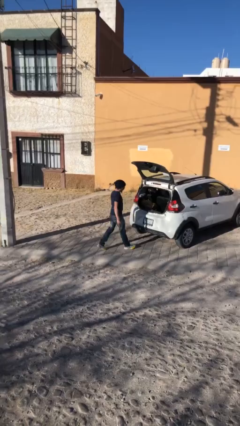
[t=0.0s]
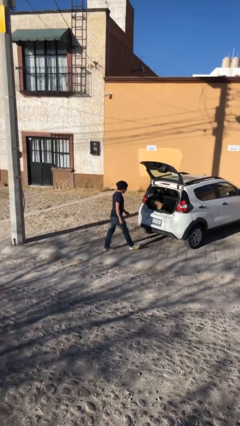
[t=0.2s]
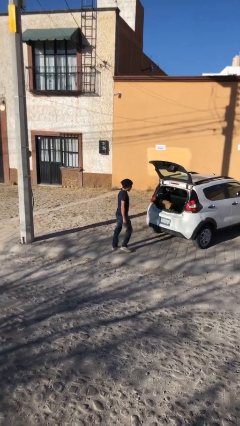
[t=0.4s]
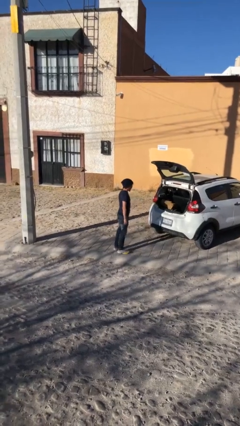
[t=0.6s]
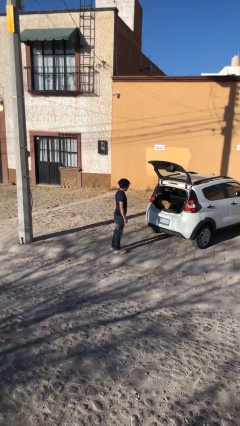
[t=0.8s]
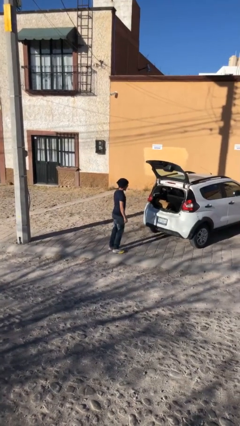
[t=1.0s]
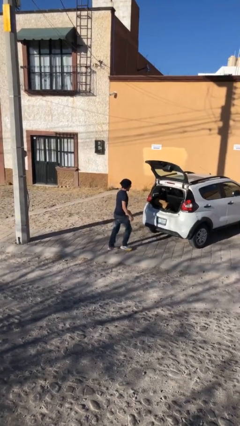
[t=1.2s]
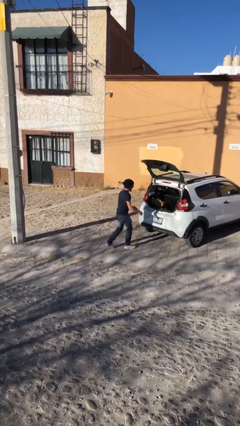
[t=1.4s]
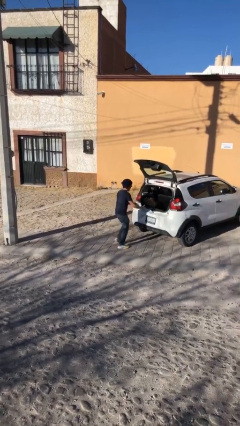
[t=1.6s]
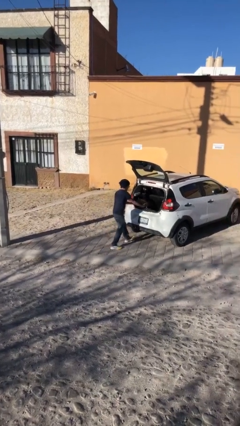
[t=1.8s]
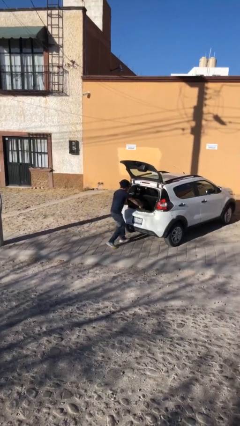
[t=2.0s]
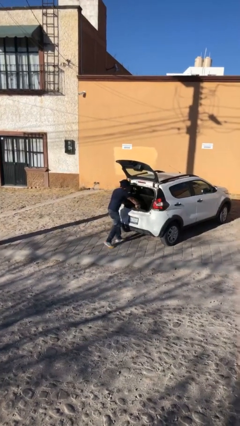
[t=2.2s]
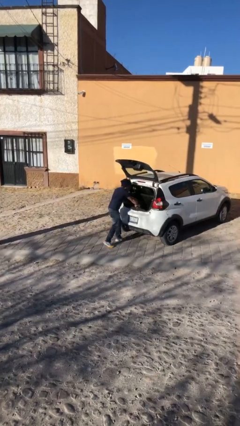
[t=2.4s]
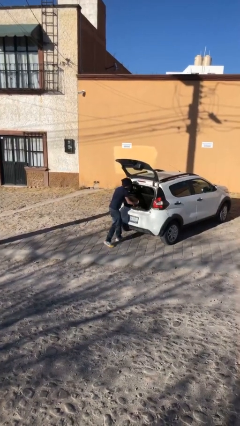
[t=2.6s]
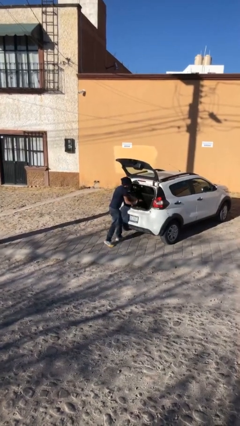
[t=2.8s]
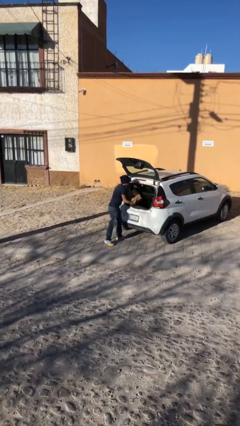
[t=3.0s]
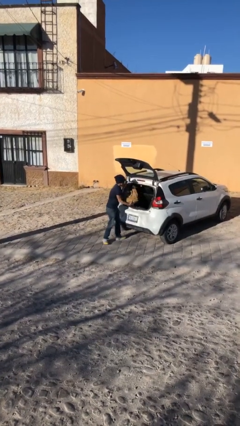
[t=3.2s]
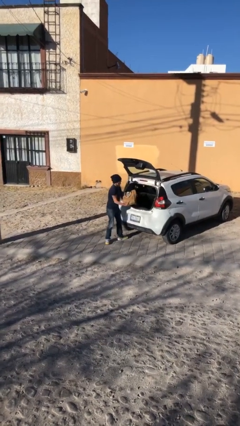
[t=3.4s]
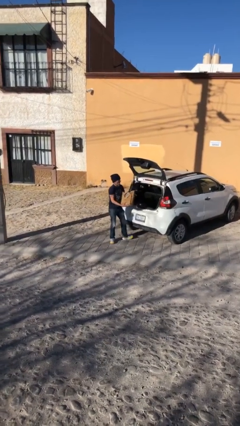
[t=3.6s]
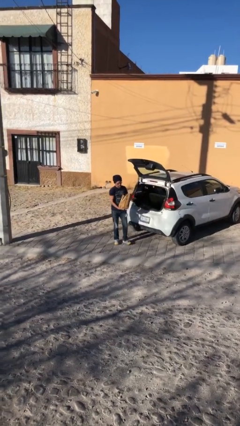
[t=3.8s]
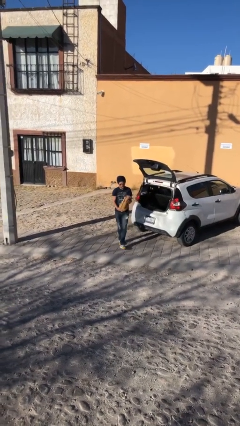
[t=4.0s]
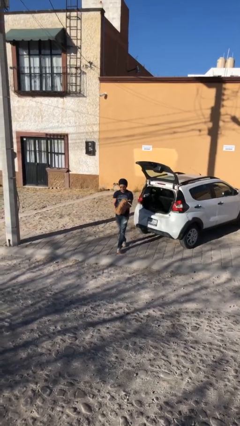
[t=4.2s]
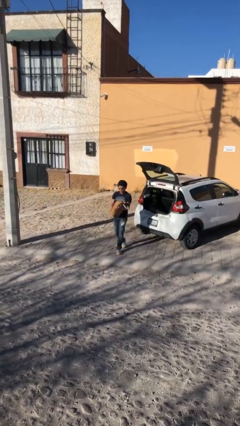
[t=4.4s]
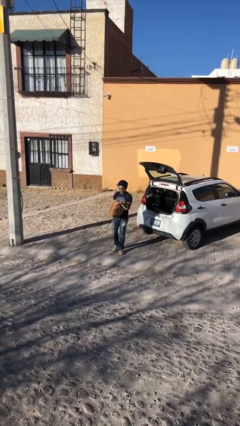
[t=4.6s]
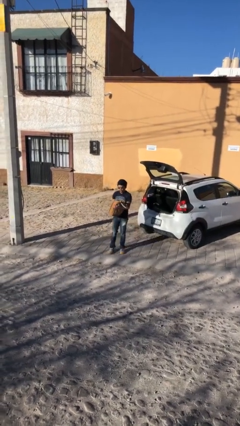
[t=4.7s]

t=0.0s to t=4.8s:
person unloads car

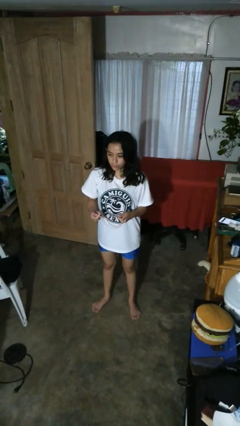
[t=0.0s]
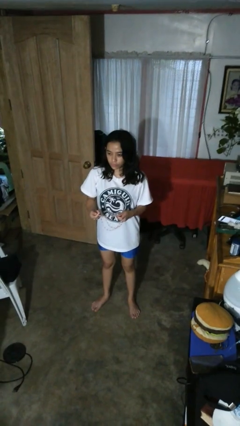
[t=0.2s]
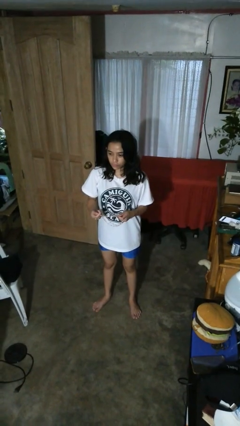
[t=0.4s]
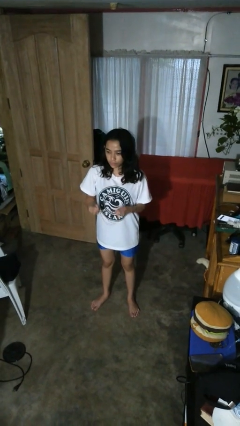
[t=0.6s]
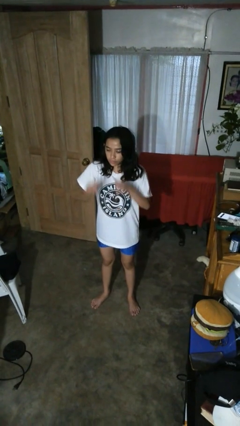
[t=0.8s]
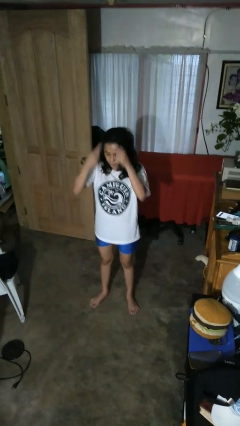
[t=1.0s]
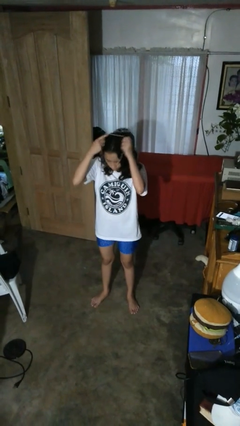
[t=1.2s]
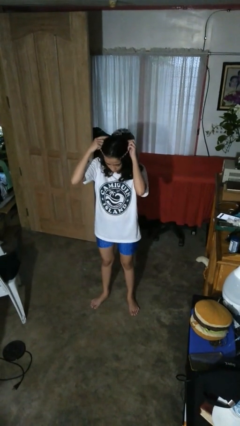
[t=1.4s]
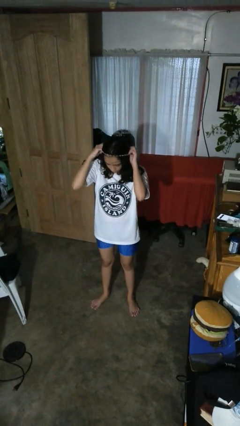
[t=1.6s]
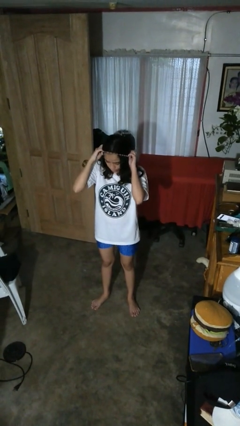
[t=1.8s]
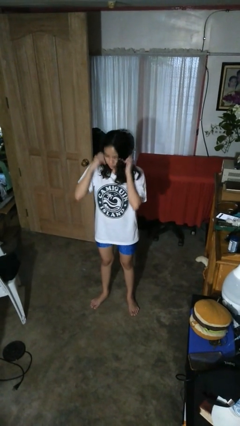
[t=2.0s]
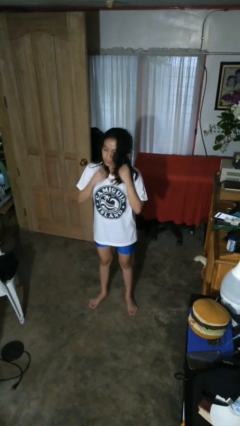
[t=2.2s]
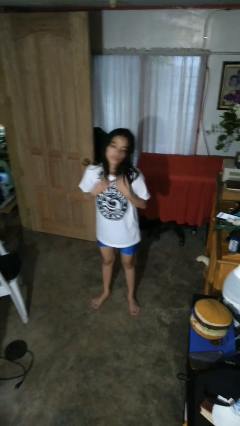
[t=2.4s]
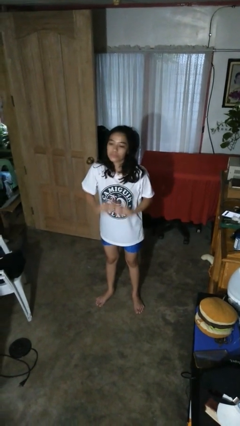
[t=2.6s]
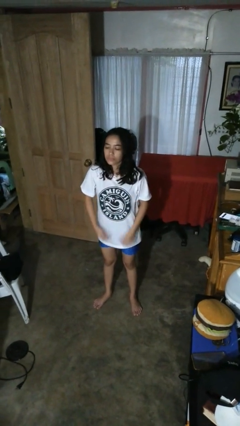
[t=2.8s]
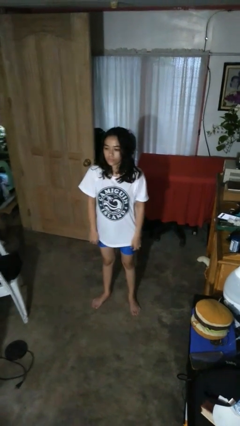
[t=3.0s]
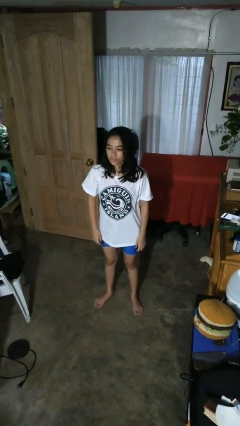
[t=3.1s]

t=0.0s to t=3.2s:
person puts on necklace

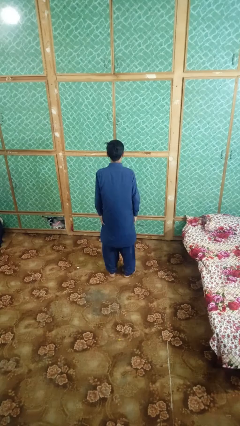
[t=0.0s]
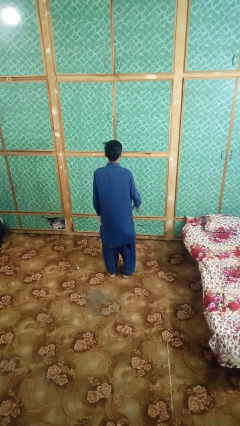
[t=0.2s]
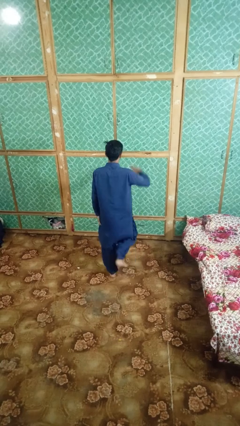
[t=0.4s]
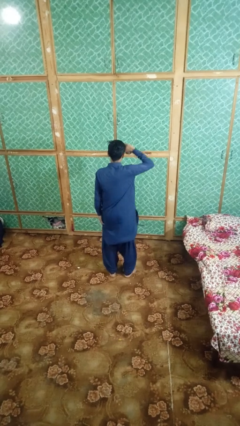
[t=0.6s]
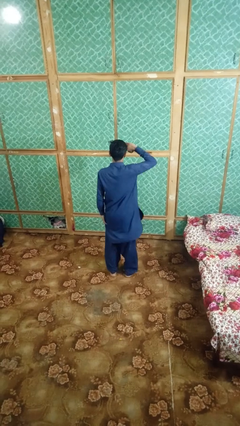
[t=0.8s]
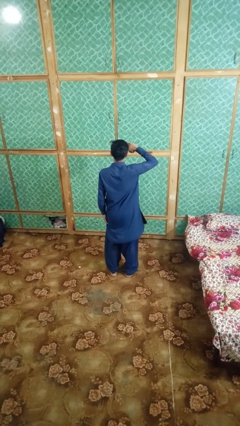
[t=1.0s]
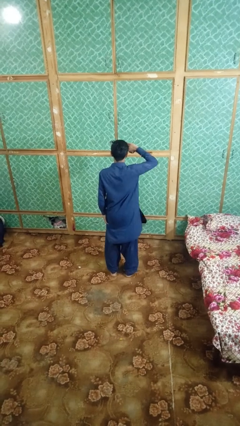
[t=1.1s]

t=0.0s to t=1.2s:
person salutes

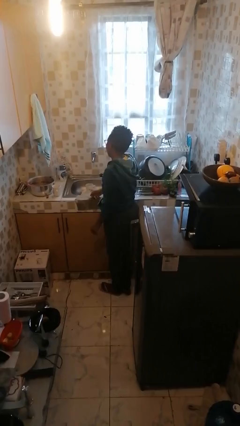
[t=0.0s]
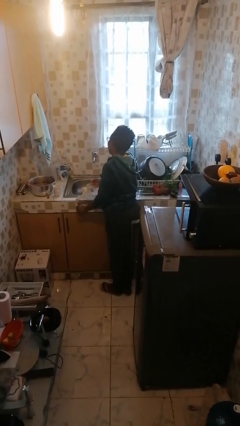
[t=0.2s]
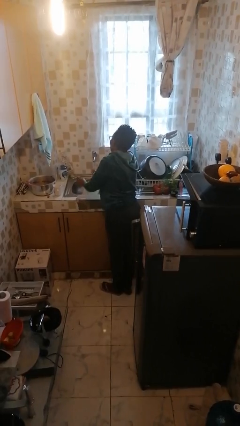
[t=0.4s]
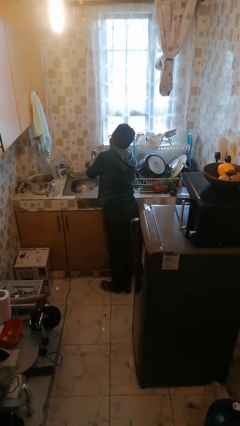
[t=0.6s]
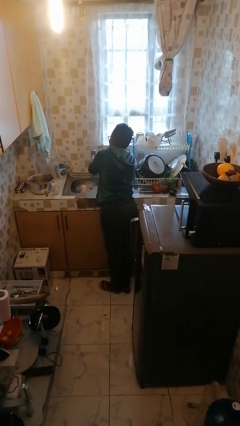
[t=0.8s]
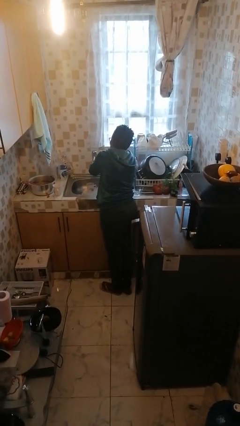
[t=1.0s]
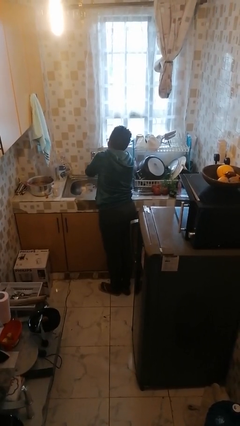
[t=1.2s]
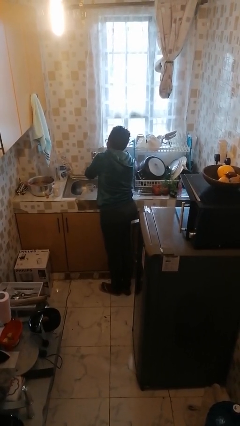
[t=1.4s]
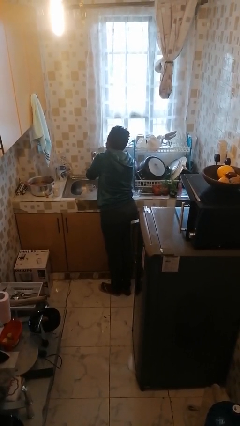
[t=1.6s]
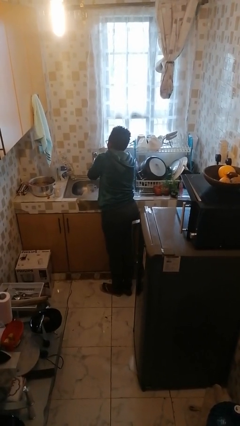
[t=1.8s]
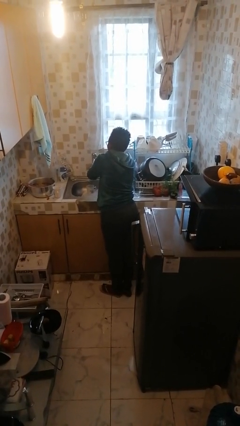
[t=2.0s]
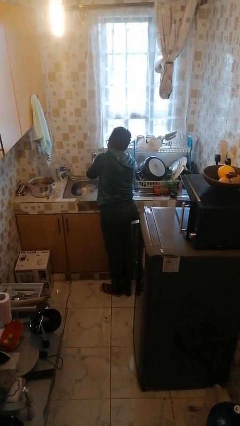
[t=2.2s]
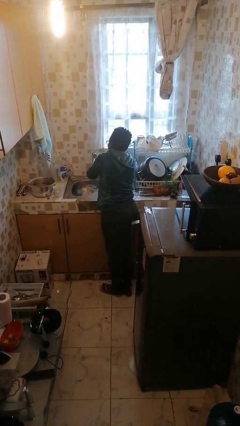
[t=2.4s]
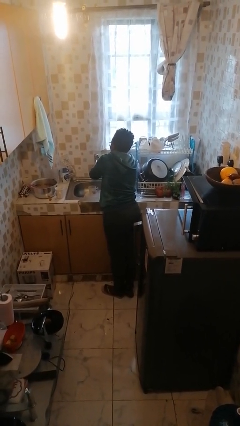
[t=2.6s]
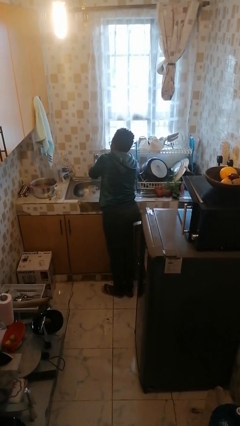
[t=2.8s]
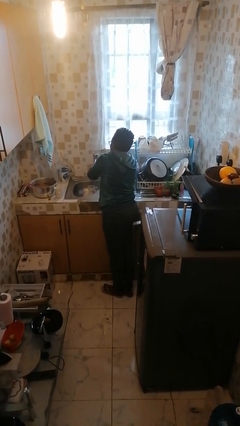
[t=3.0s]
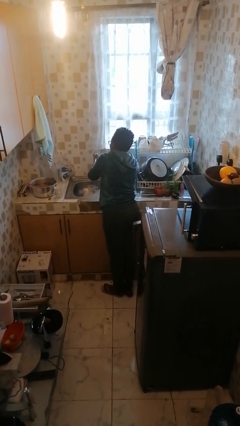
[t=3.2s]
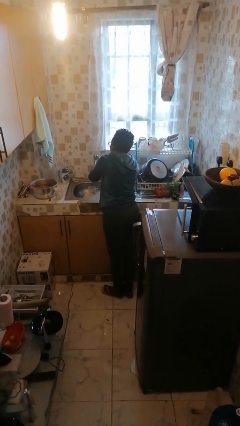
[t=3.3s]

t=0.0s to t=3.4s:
person washes hands

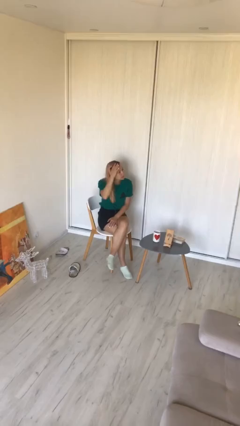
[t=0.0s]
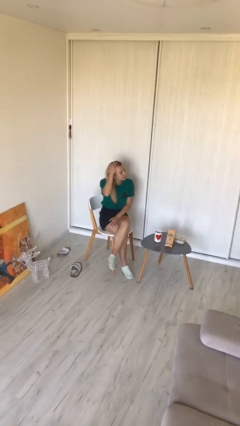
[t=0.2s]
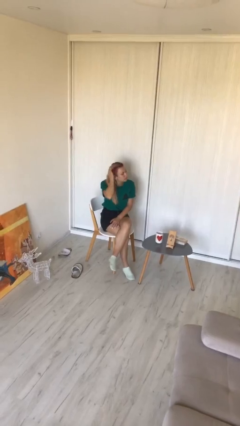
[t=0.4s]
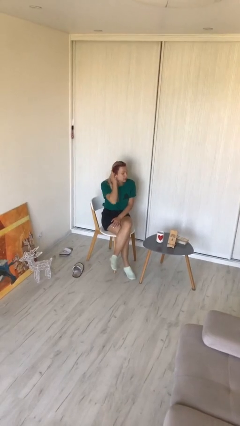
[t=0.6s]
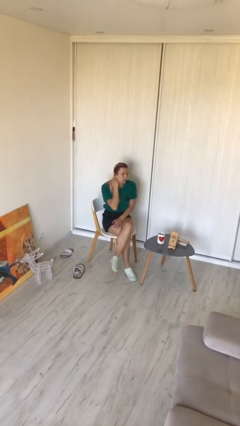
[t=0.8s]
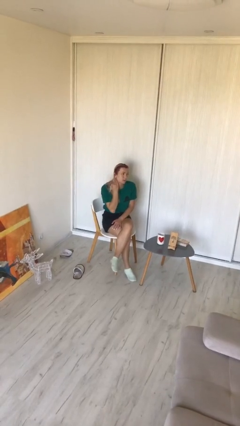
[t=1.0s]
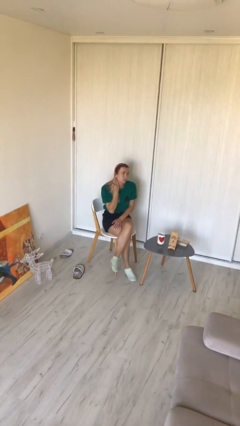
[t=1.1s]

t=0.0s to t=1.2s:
person strokes hair

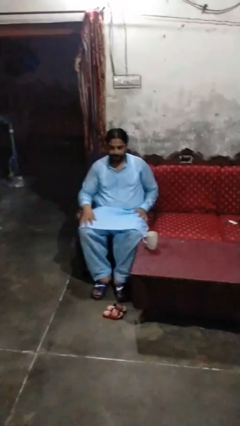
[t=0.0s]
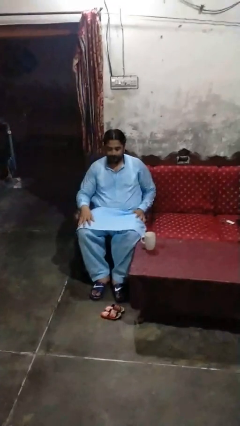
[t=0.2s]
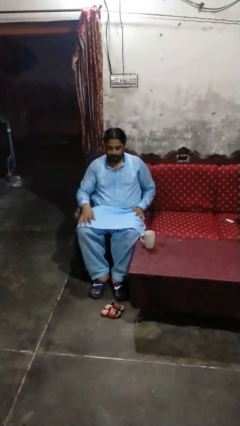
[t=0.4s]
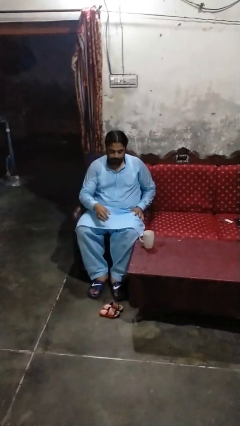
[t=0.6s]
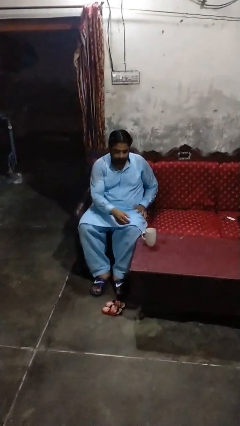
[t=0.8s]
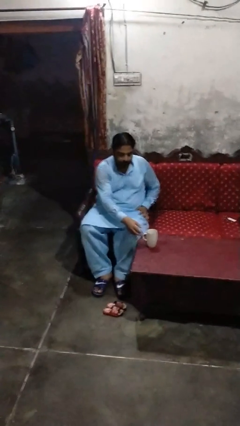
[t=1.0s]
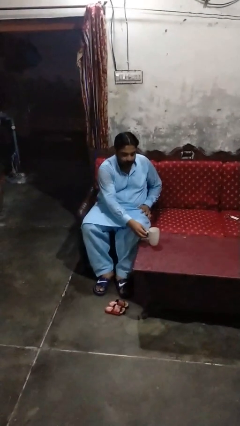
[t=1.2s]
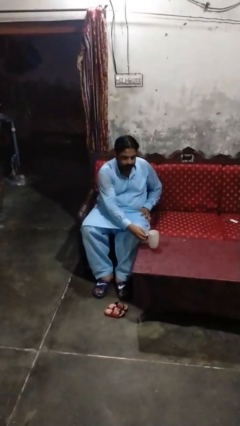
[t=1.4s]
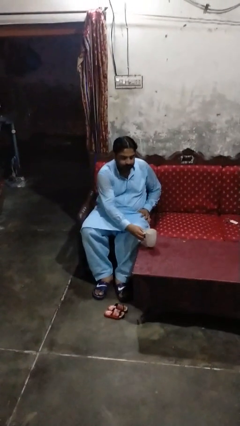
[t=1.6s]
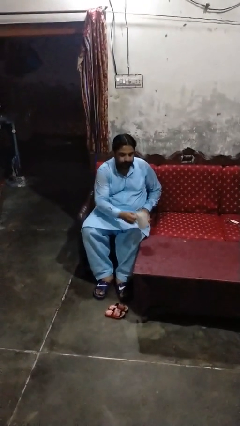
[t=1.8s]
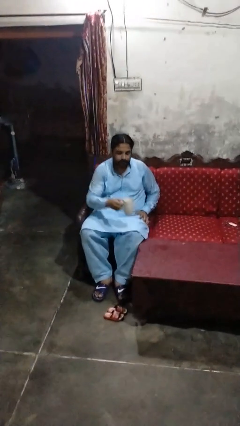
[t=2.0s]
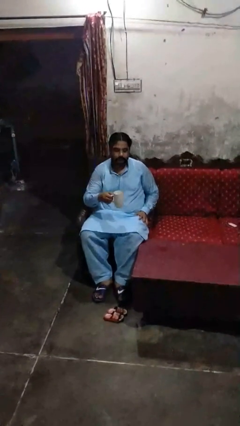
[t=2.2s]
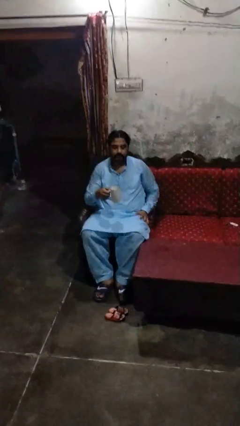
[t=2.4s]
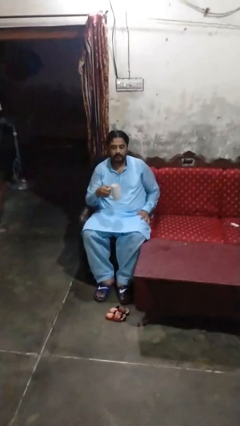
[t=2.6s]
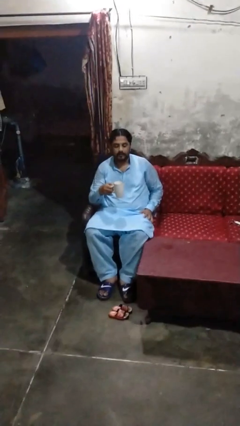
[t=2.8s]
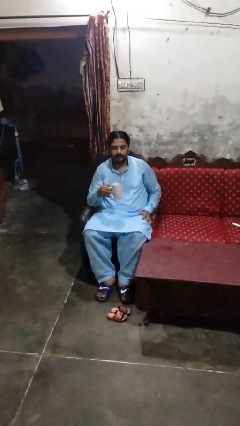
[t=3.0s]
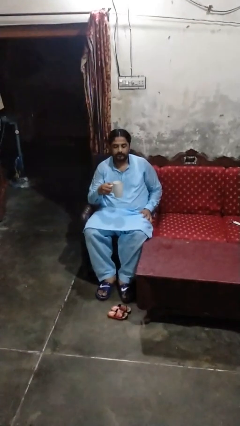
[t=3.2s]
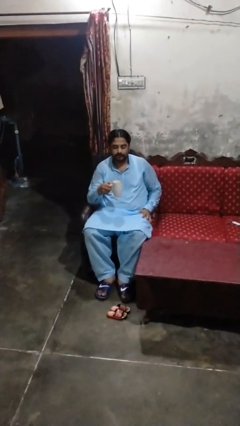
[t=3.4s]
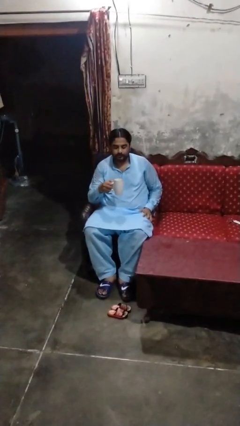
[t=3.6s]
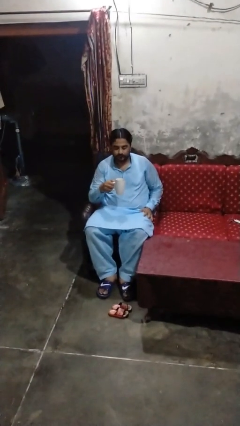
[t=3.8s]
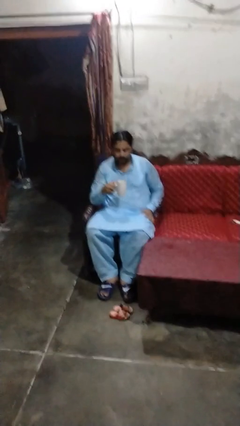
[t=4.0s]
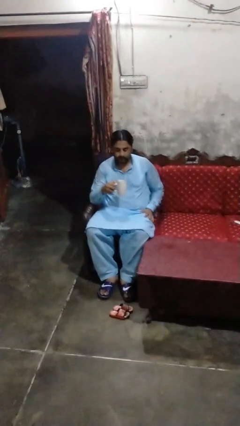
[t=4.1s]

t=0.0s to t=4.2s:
person picks up object from table
